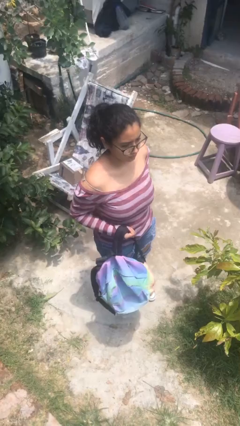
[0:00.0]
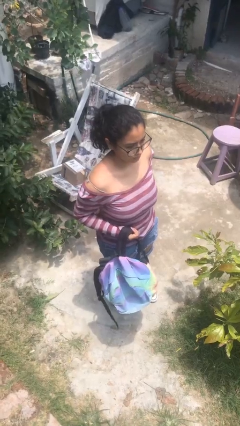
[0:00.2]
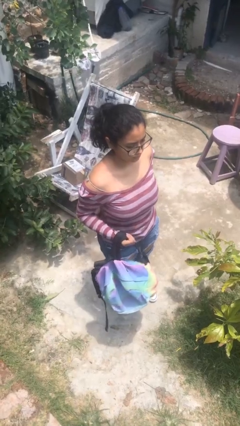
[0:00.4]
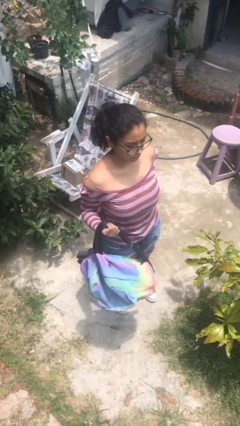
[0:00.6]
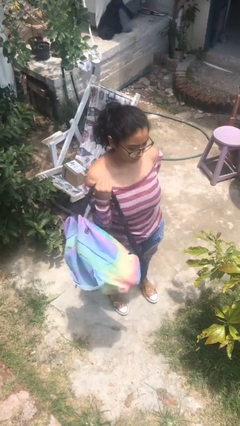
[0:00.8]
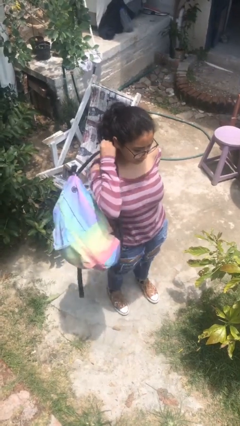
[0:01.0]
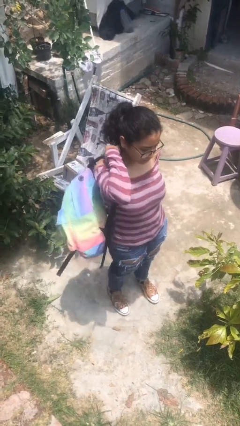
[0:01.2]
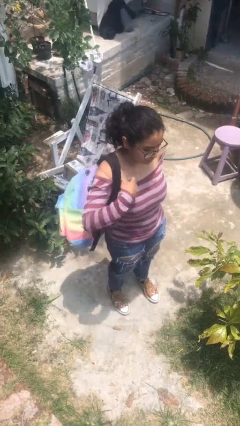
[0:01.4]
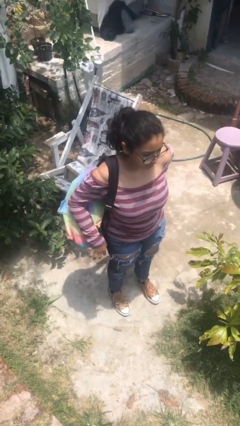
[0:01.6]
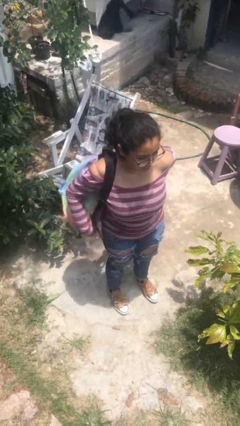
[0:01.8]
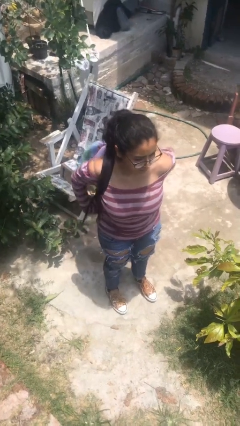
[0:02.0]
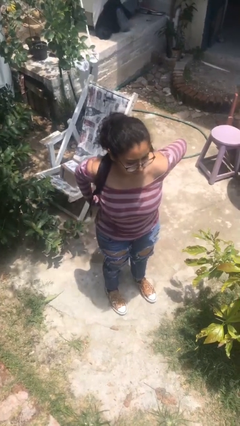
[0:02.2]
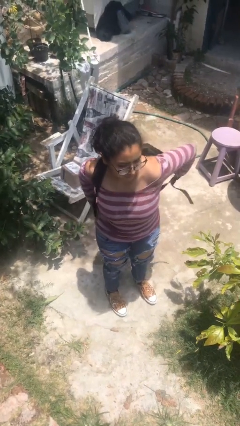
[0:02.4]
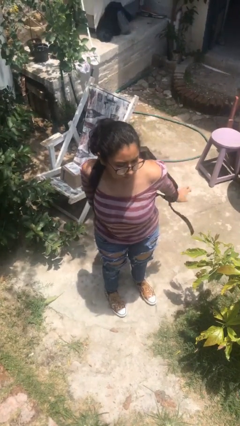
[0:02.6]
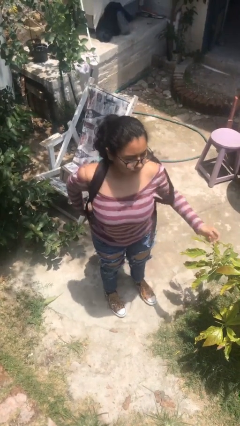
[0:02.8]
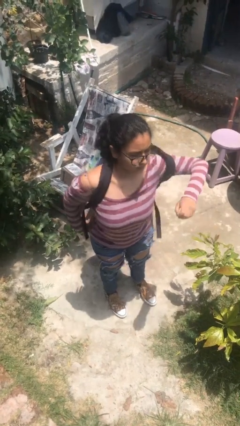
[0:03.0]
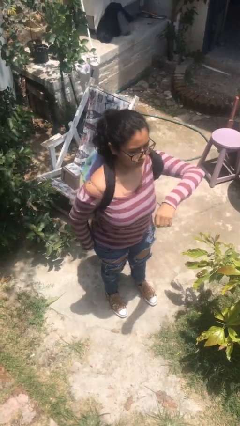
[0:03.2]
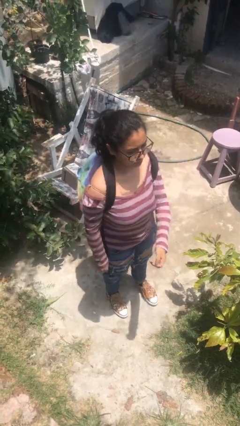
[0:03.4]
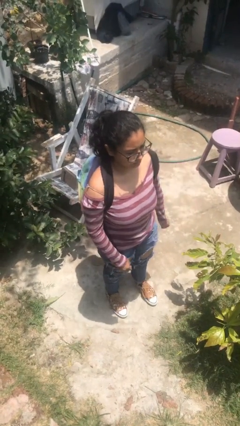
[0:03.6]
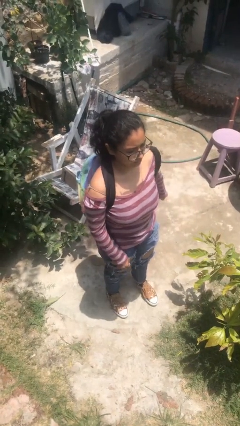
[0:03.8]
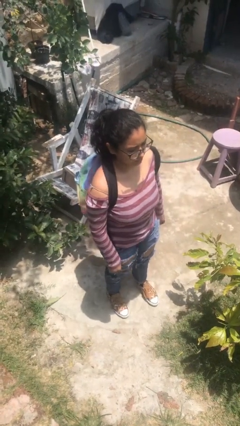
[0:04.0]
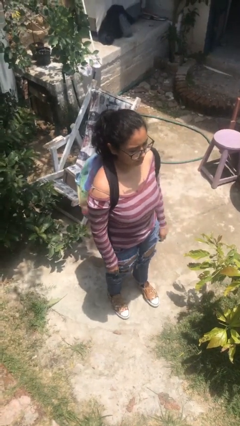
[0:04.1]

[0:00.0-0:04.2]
person puts on backpack

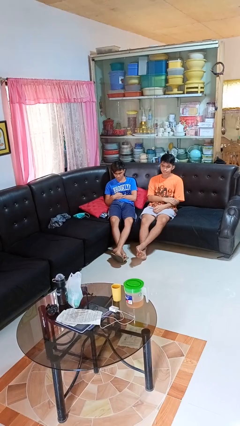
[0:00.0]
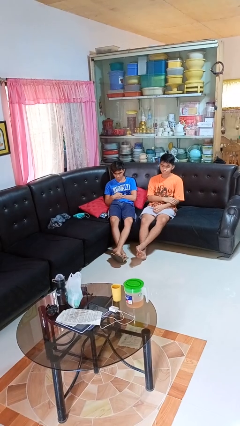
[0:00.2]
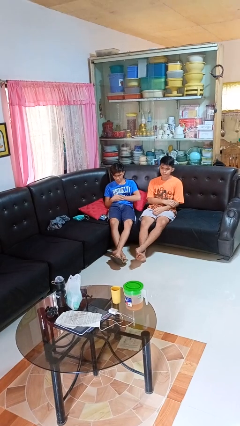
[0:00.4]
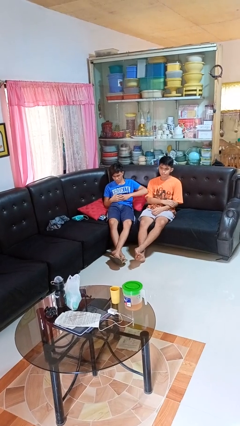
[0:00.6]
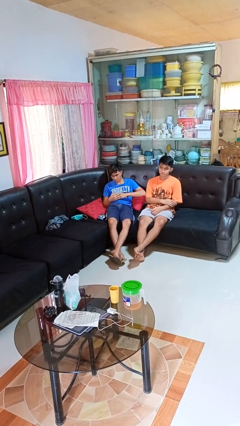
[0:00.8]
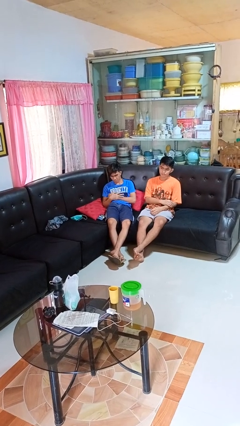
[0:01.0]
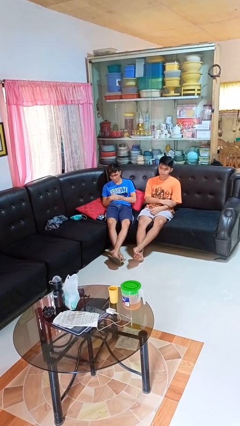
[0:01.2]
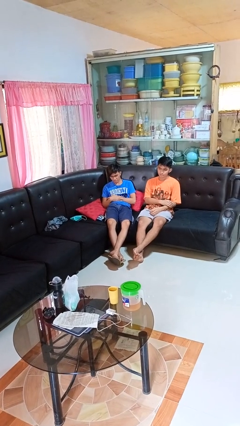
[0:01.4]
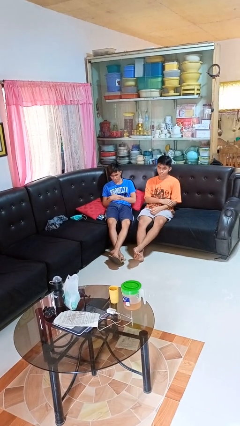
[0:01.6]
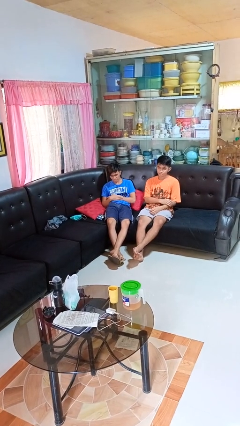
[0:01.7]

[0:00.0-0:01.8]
person nudges person with elbow

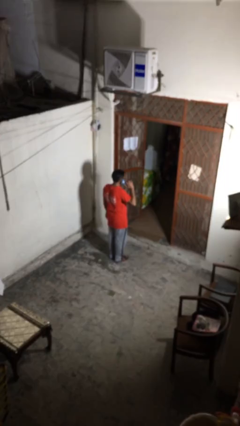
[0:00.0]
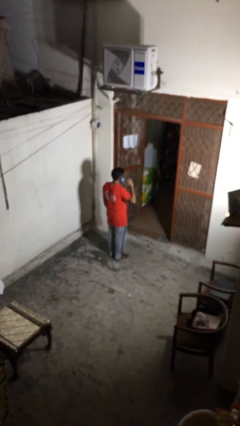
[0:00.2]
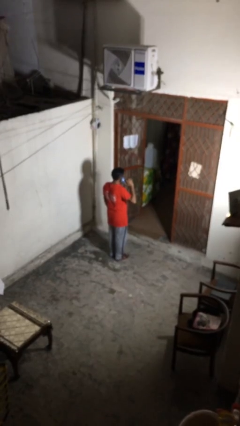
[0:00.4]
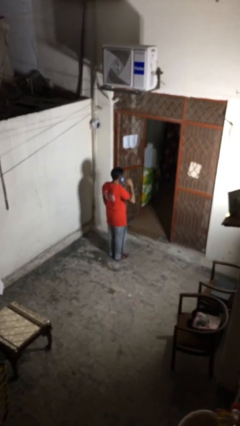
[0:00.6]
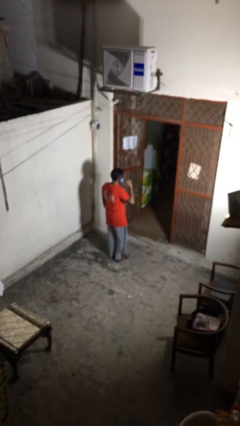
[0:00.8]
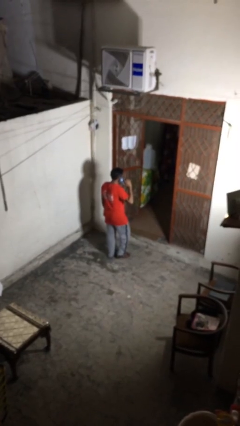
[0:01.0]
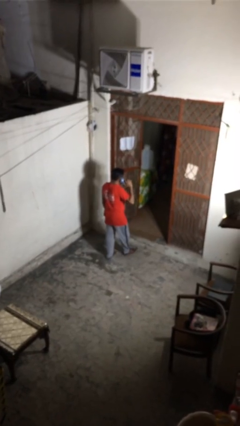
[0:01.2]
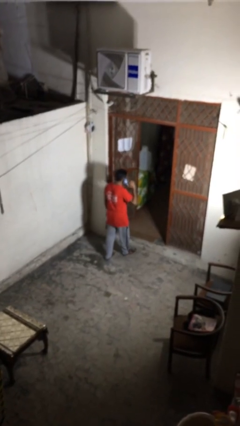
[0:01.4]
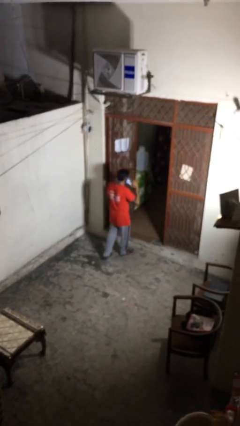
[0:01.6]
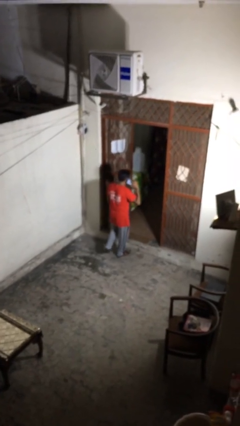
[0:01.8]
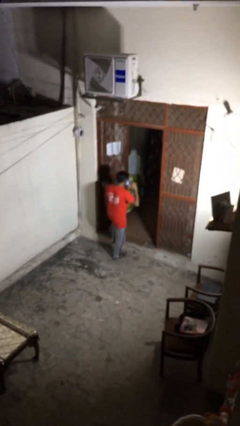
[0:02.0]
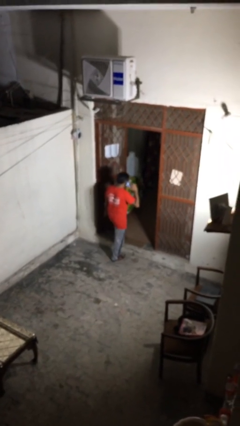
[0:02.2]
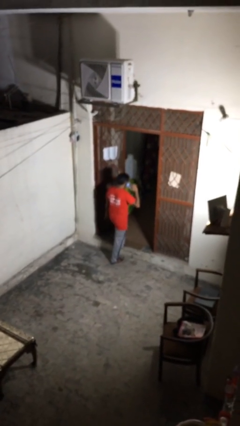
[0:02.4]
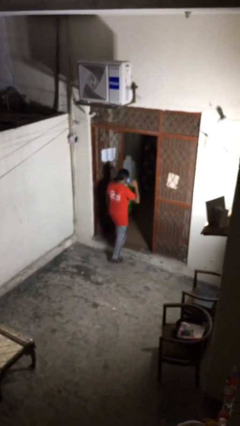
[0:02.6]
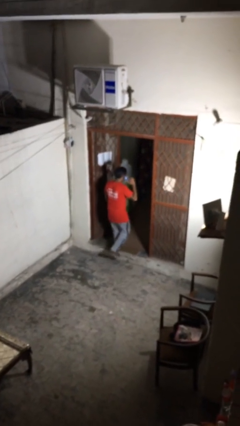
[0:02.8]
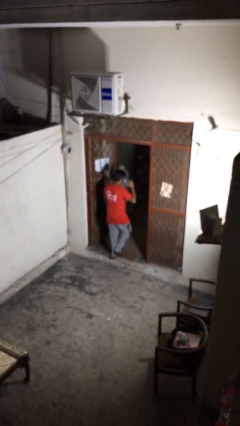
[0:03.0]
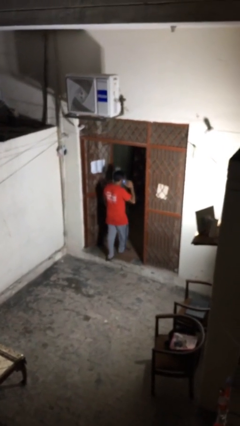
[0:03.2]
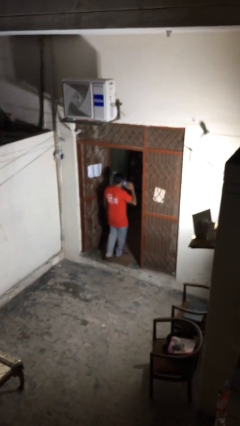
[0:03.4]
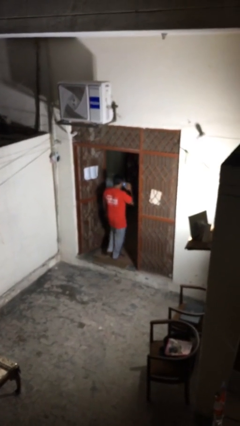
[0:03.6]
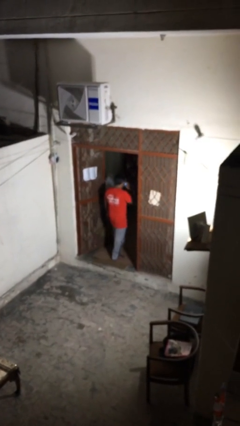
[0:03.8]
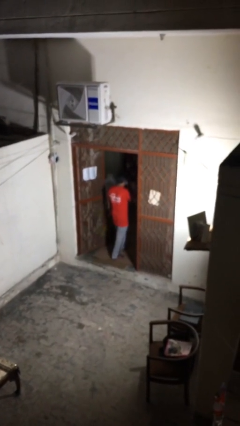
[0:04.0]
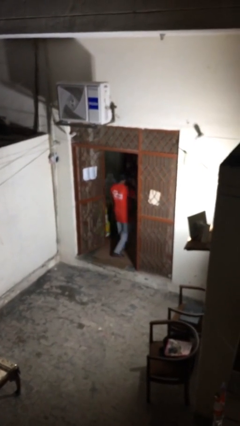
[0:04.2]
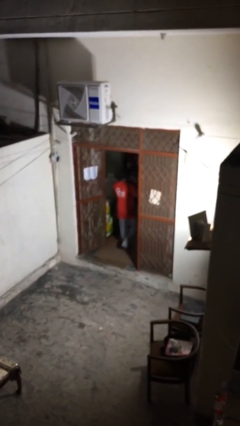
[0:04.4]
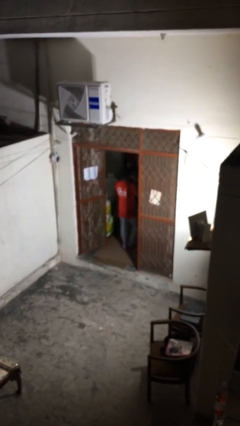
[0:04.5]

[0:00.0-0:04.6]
person exits scene through structure

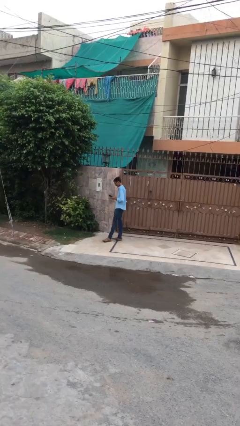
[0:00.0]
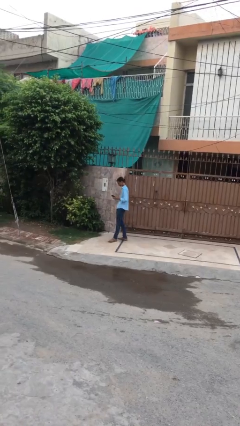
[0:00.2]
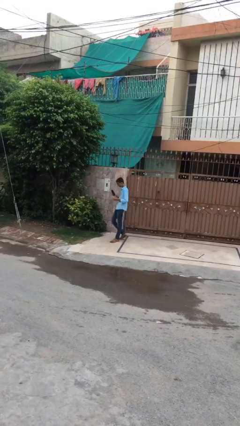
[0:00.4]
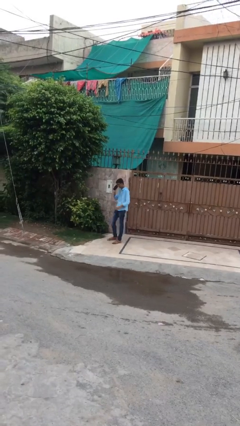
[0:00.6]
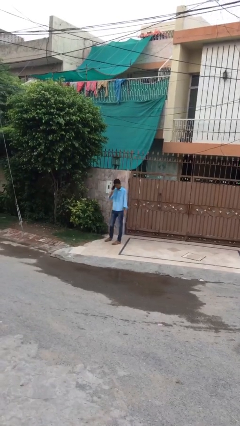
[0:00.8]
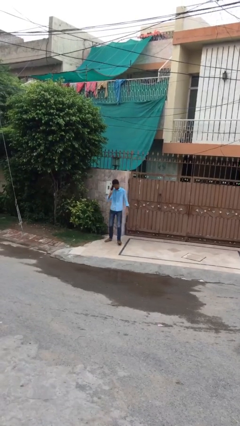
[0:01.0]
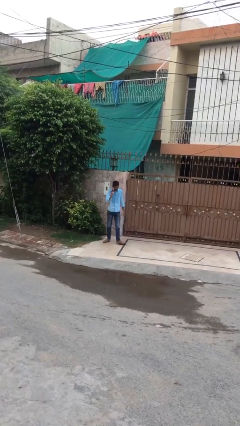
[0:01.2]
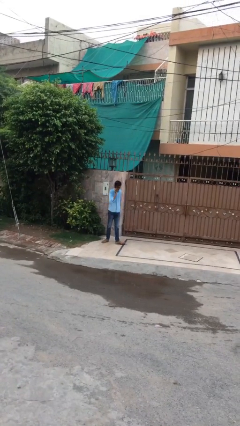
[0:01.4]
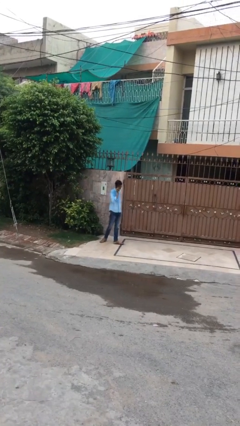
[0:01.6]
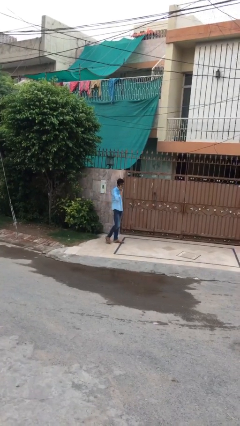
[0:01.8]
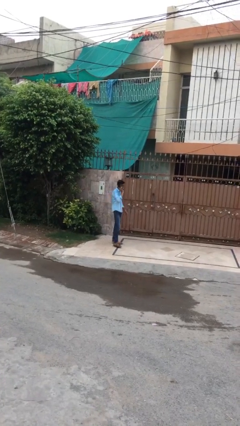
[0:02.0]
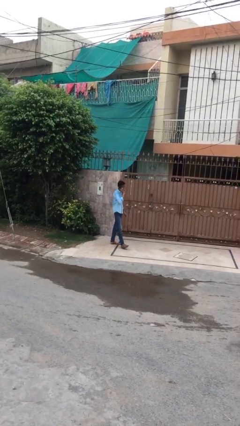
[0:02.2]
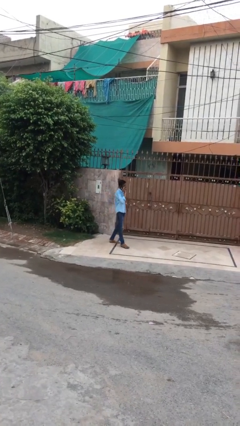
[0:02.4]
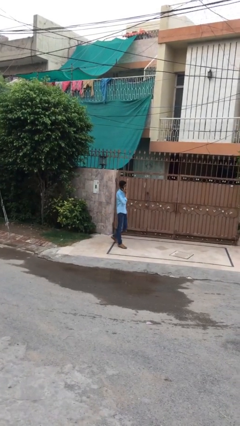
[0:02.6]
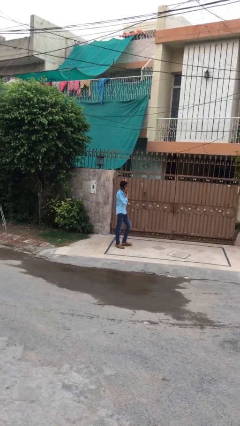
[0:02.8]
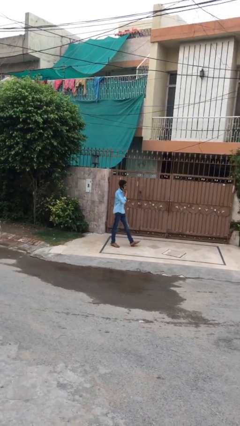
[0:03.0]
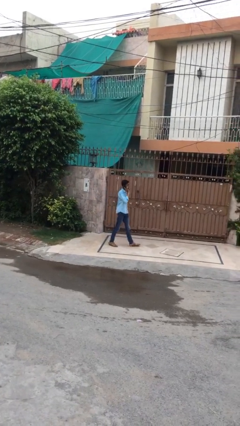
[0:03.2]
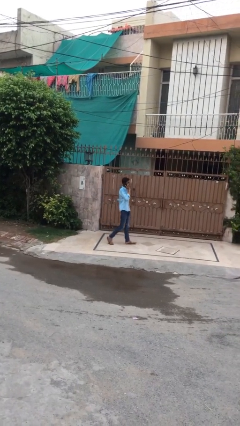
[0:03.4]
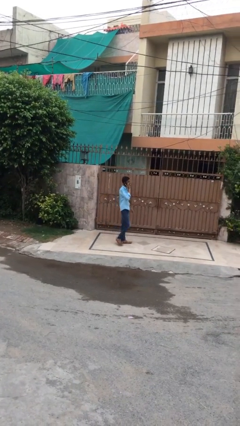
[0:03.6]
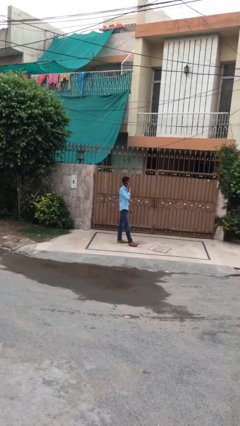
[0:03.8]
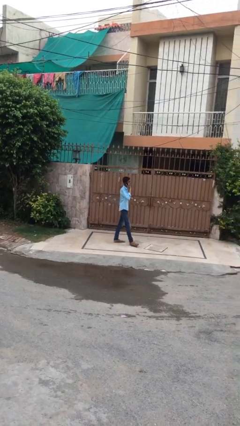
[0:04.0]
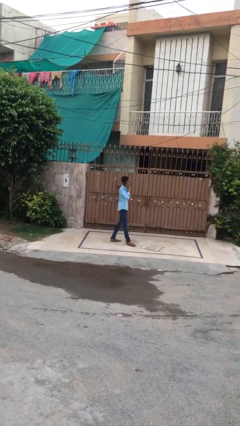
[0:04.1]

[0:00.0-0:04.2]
person talks on phone

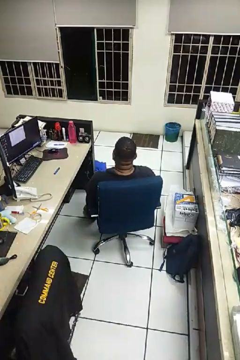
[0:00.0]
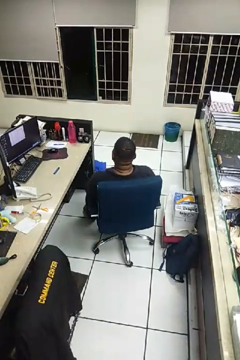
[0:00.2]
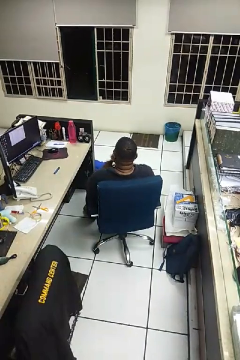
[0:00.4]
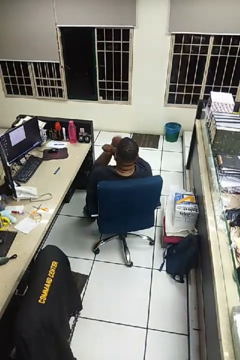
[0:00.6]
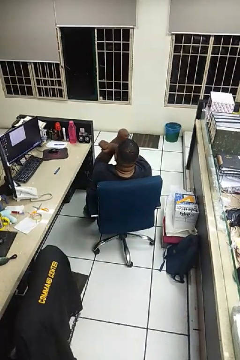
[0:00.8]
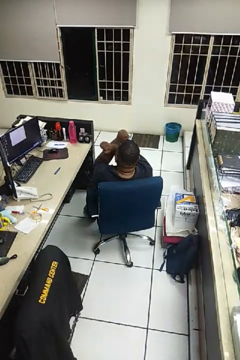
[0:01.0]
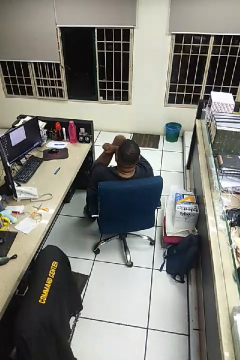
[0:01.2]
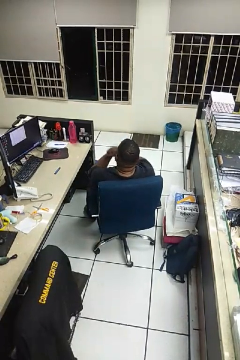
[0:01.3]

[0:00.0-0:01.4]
person gestures arms x

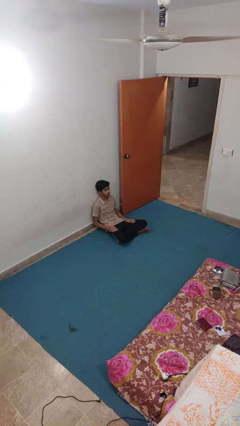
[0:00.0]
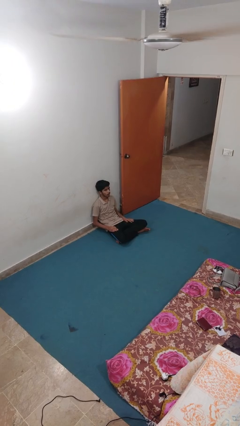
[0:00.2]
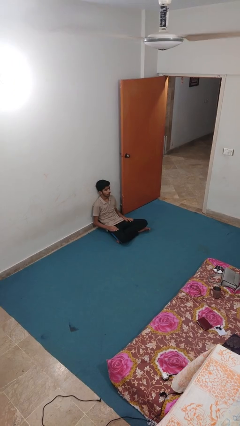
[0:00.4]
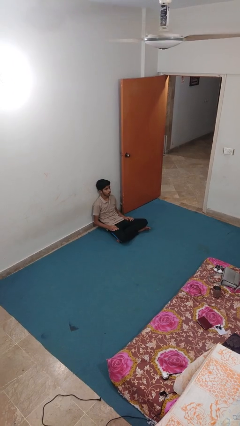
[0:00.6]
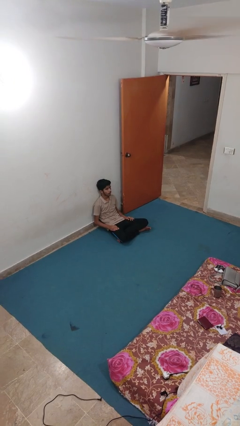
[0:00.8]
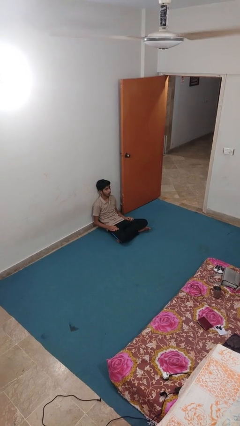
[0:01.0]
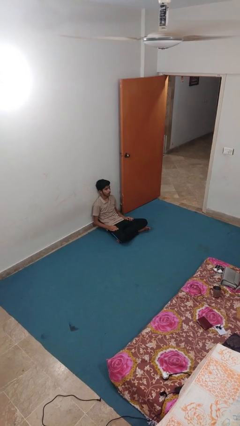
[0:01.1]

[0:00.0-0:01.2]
person slaps hands on thighs

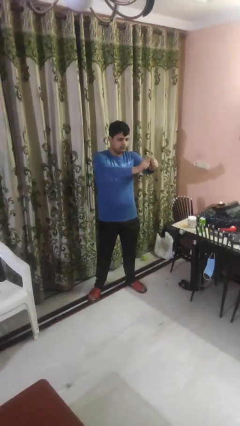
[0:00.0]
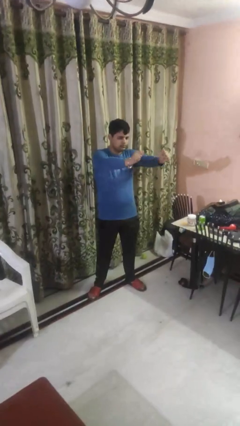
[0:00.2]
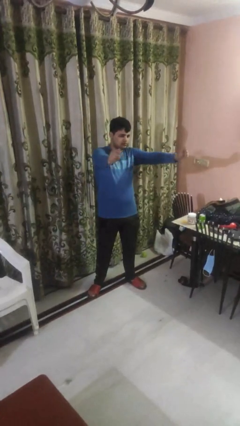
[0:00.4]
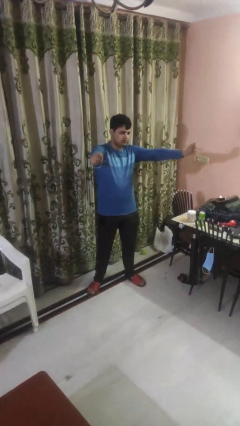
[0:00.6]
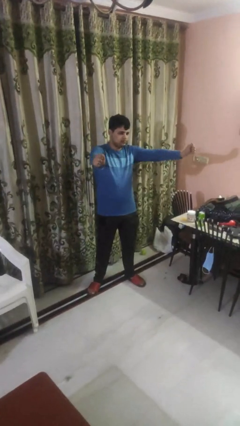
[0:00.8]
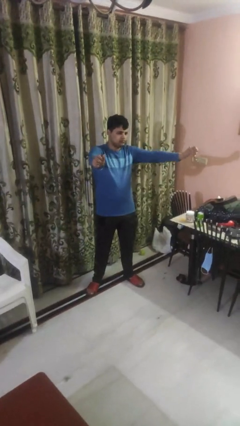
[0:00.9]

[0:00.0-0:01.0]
person gestures zoom in
